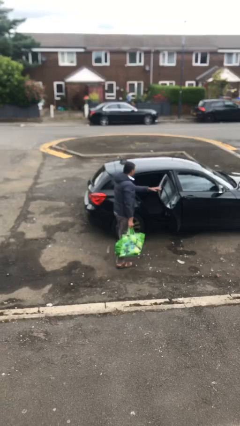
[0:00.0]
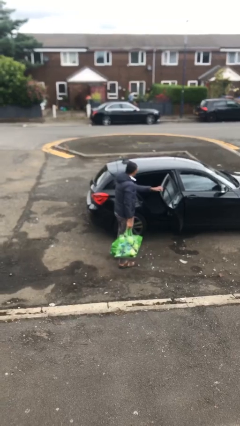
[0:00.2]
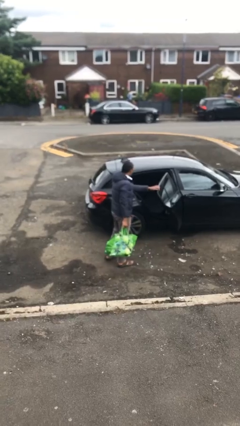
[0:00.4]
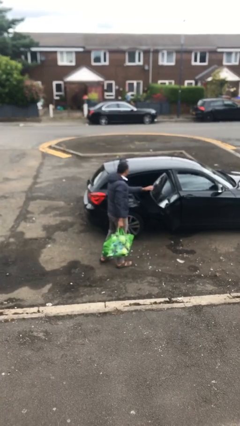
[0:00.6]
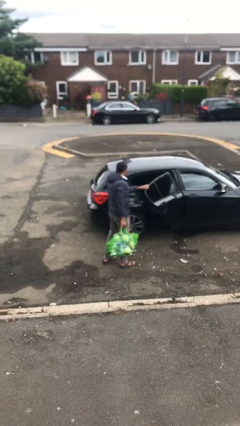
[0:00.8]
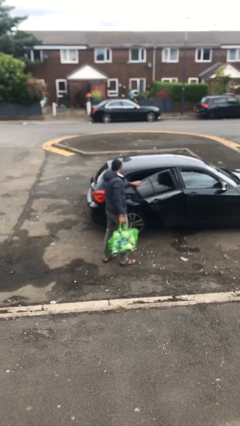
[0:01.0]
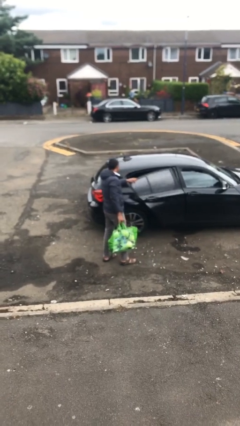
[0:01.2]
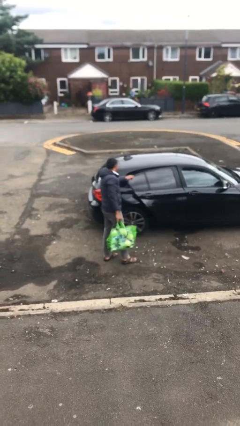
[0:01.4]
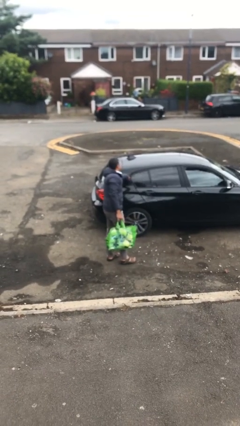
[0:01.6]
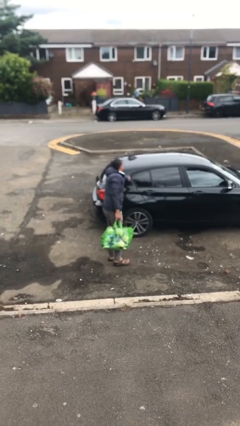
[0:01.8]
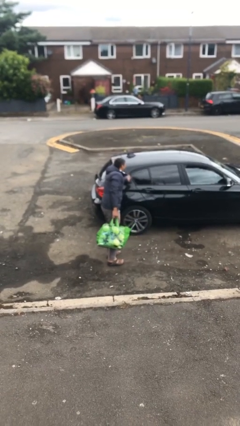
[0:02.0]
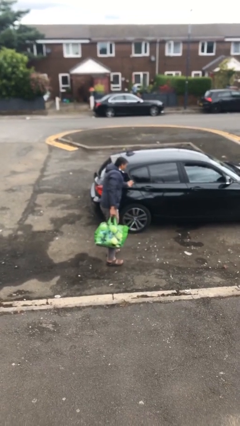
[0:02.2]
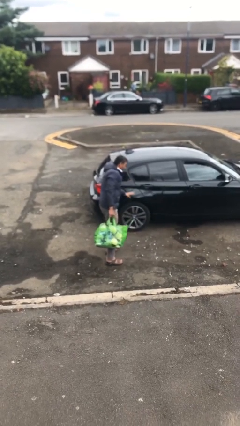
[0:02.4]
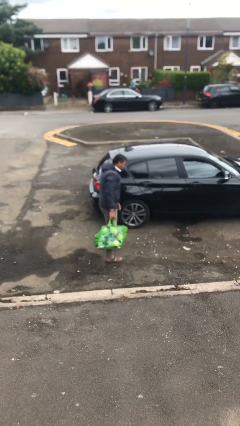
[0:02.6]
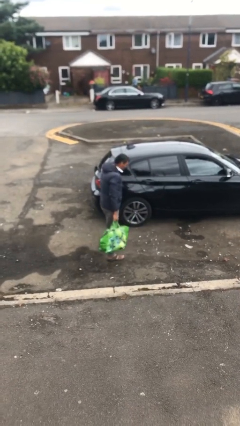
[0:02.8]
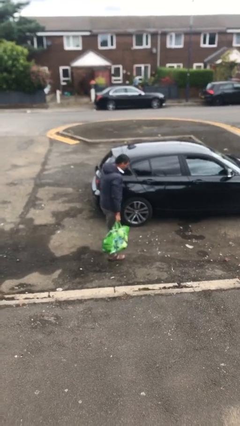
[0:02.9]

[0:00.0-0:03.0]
person closes car door

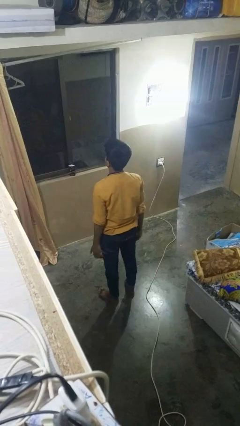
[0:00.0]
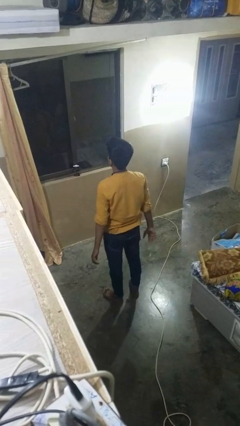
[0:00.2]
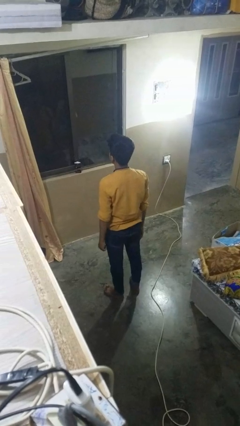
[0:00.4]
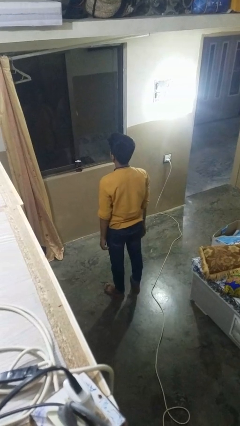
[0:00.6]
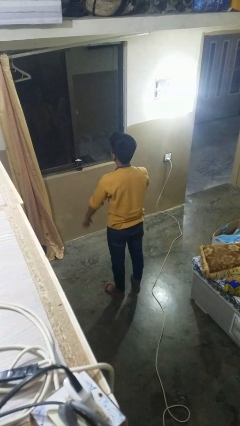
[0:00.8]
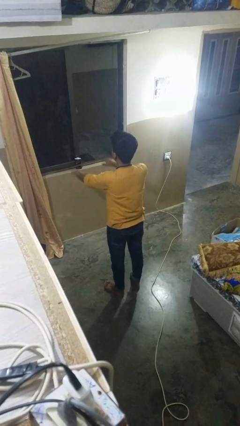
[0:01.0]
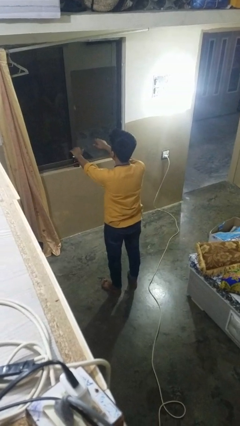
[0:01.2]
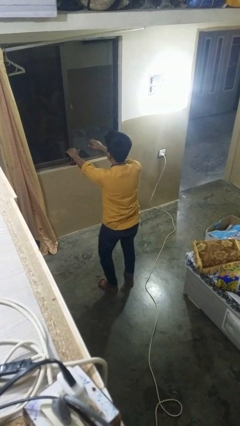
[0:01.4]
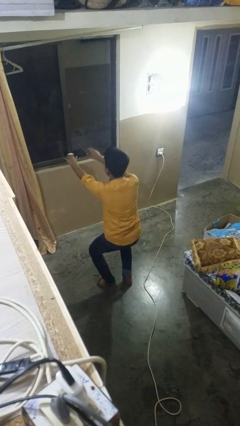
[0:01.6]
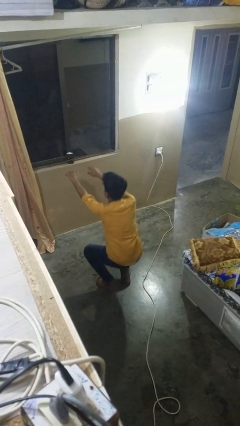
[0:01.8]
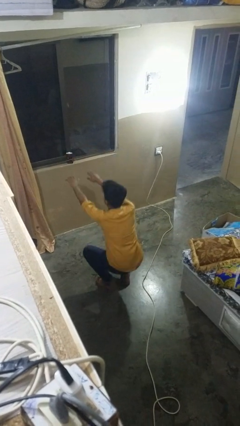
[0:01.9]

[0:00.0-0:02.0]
person squats

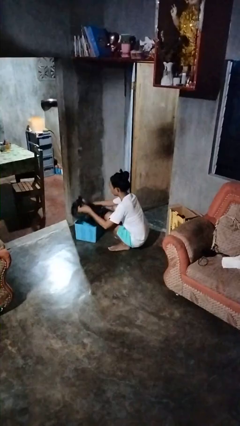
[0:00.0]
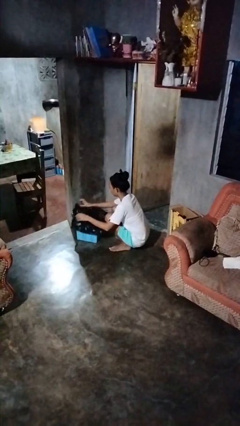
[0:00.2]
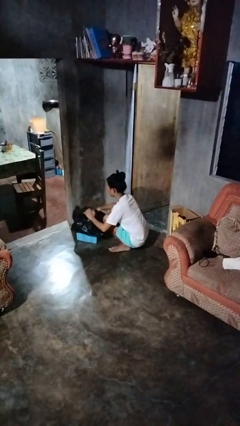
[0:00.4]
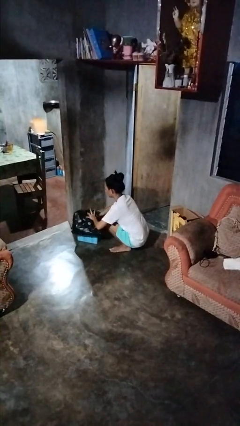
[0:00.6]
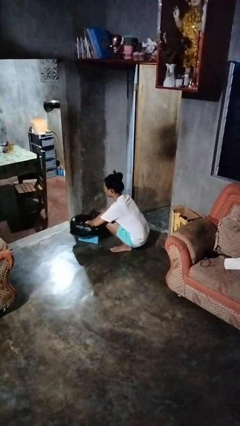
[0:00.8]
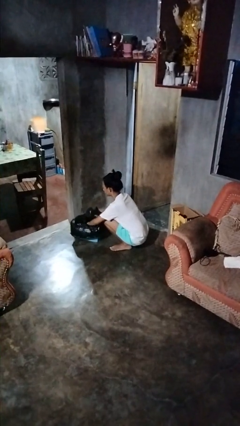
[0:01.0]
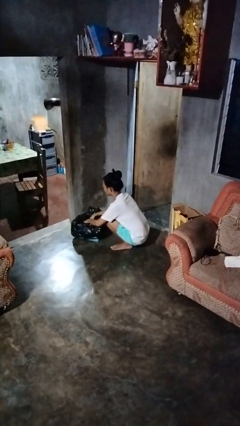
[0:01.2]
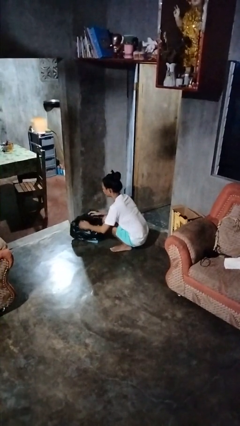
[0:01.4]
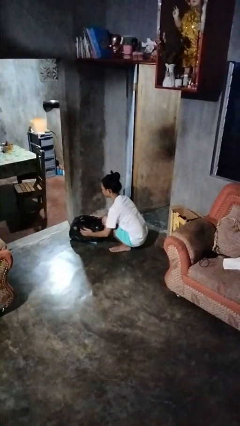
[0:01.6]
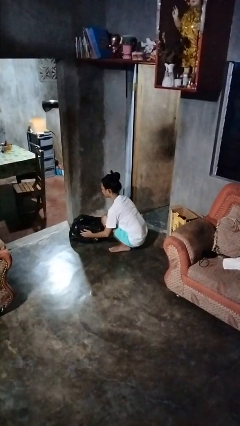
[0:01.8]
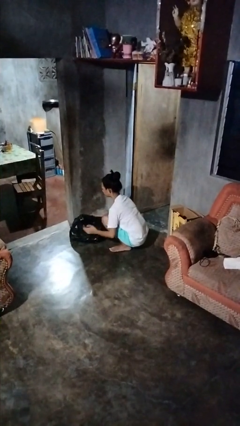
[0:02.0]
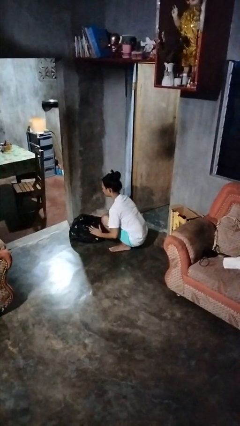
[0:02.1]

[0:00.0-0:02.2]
person inserts trashbag into trashcan

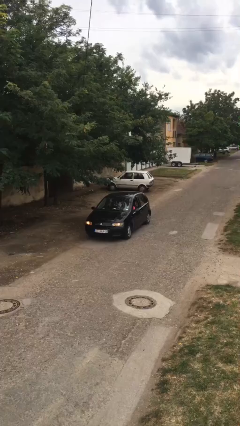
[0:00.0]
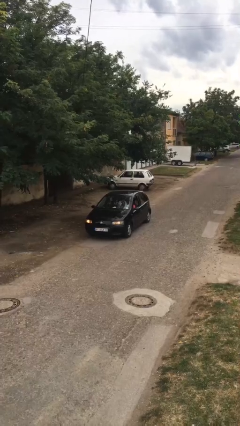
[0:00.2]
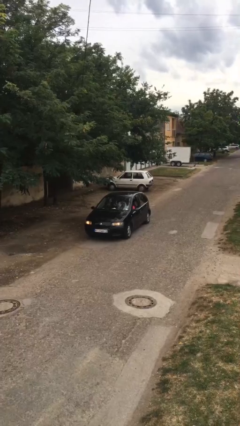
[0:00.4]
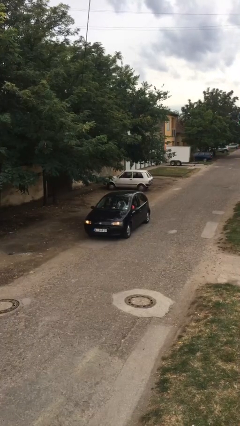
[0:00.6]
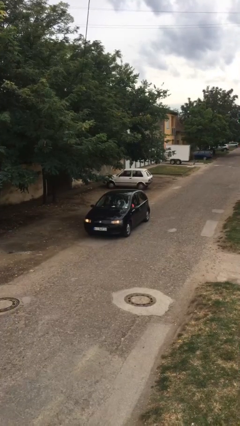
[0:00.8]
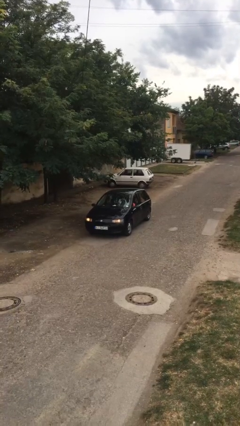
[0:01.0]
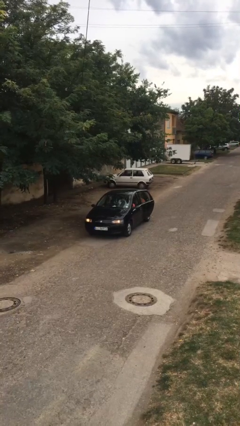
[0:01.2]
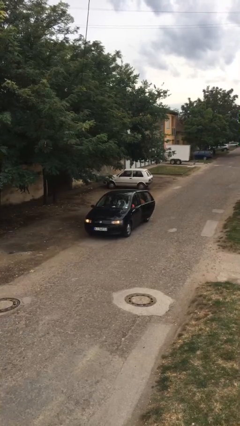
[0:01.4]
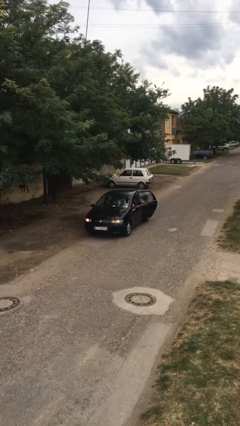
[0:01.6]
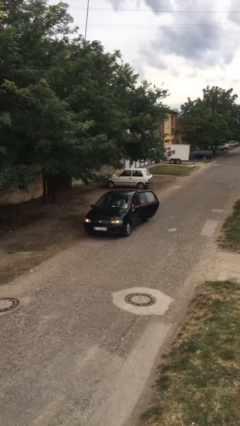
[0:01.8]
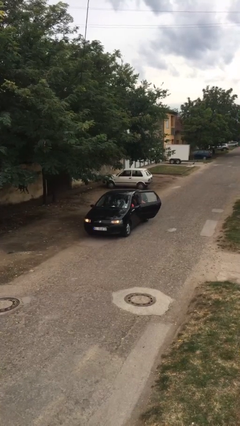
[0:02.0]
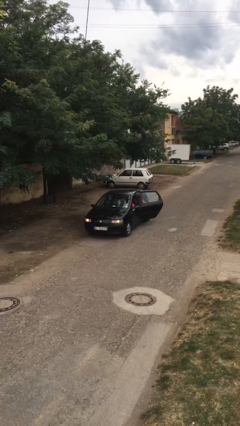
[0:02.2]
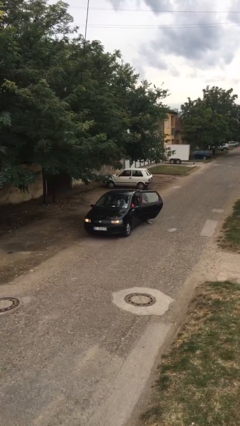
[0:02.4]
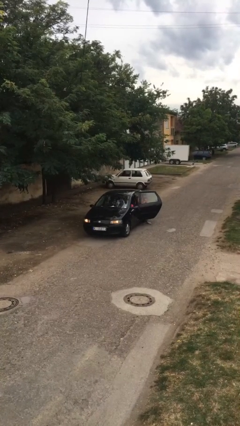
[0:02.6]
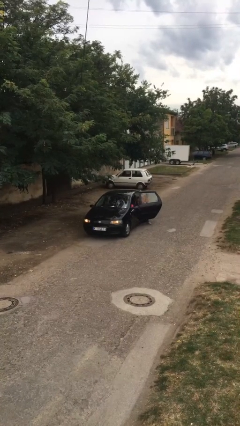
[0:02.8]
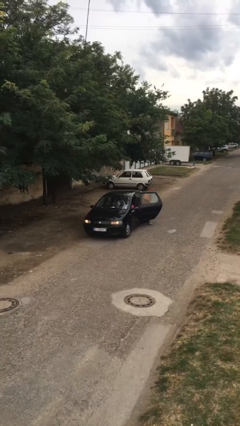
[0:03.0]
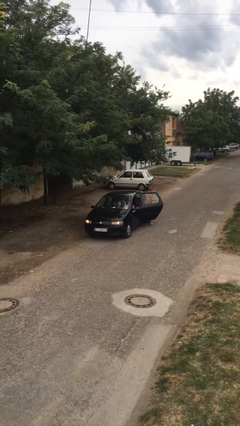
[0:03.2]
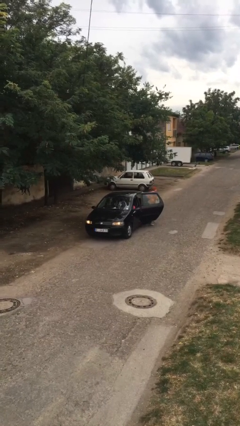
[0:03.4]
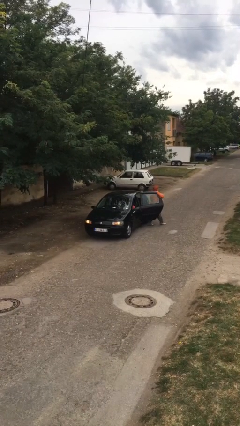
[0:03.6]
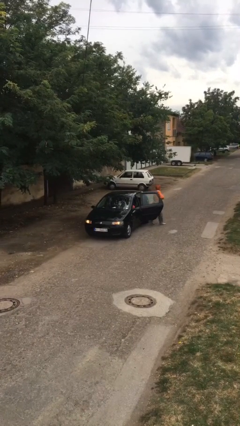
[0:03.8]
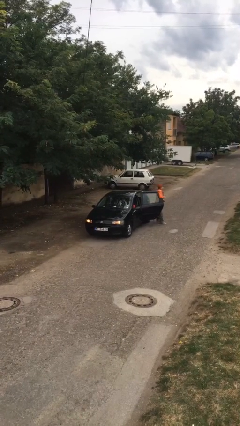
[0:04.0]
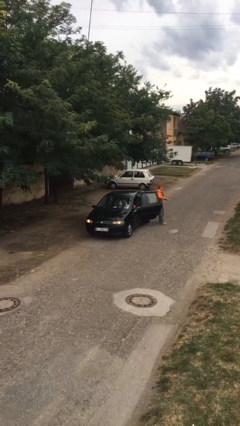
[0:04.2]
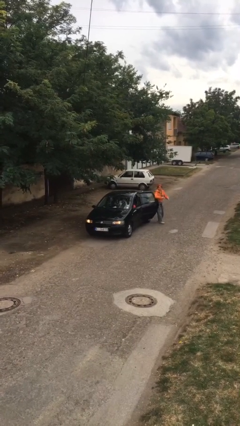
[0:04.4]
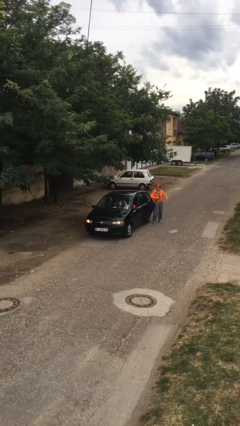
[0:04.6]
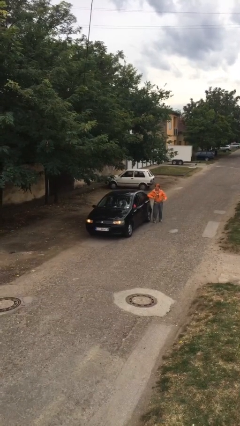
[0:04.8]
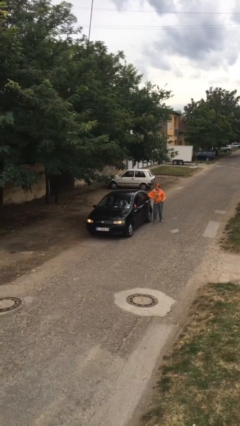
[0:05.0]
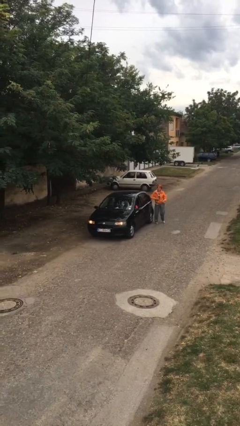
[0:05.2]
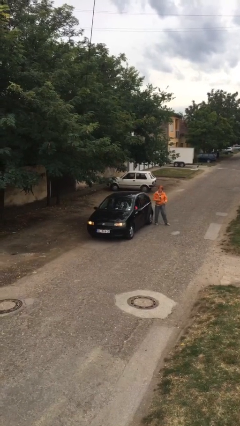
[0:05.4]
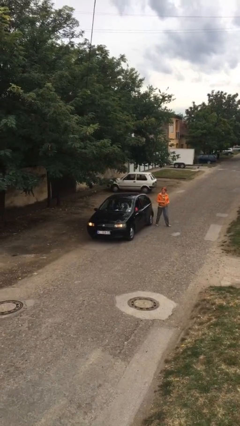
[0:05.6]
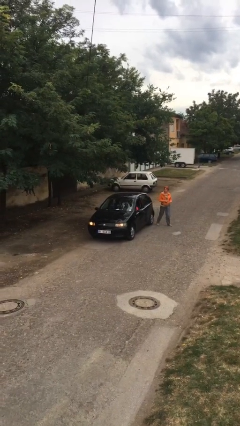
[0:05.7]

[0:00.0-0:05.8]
car drops off person

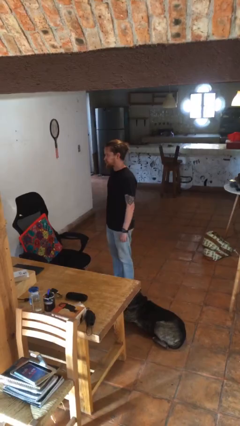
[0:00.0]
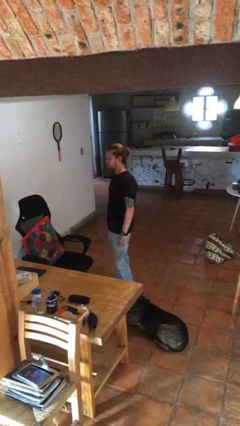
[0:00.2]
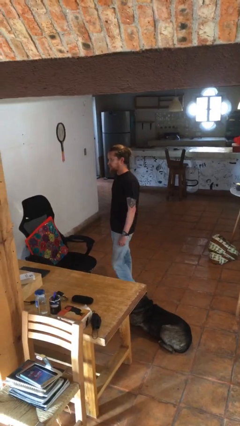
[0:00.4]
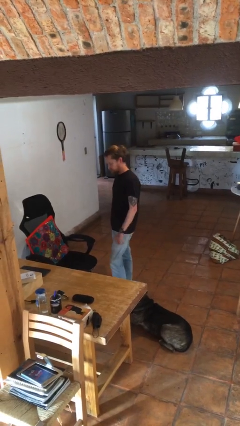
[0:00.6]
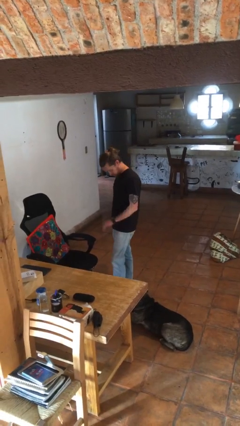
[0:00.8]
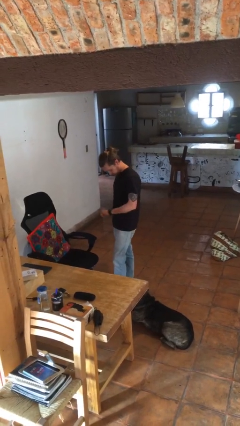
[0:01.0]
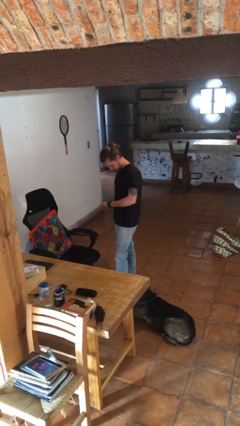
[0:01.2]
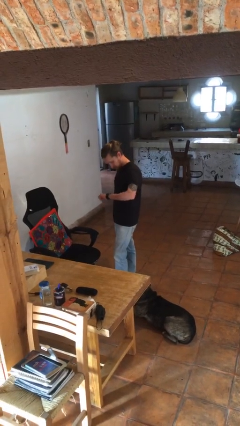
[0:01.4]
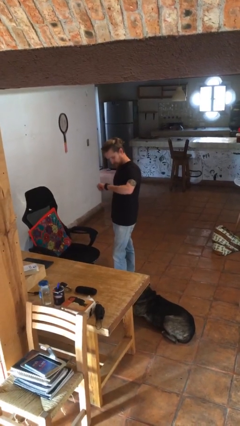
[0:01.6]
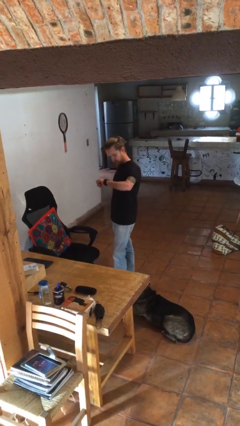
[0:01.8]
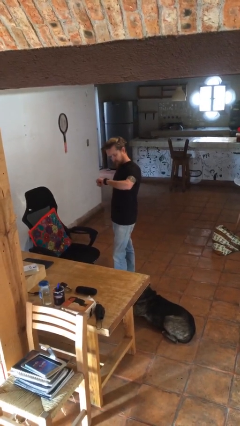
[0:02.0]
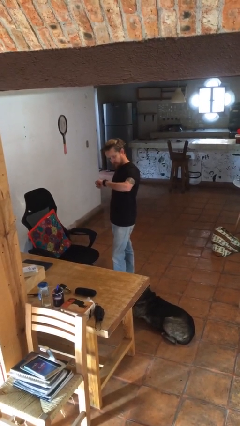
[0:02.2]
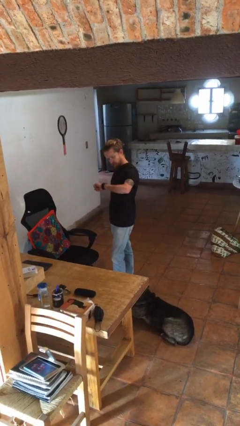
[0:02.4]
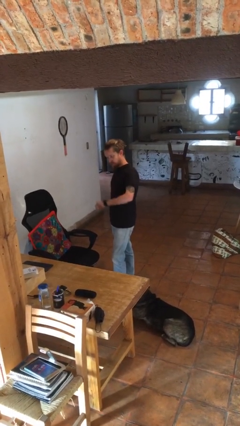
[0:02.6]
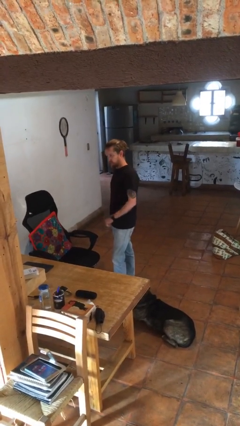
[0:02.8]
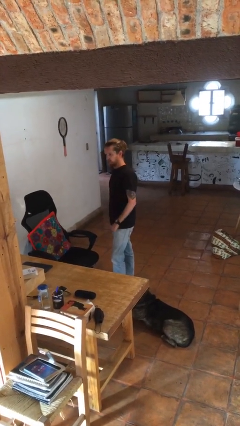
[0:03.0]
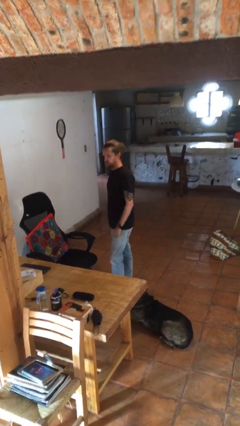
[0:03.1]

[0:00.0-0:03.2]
person looks at wristwatch

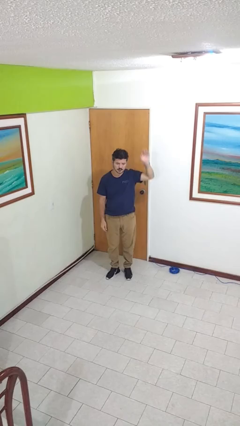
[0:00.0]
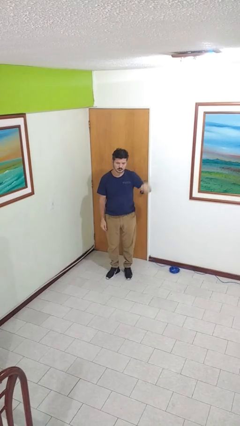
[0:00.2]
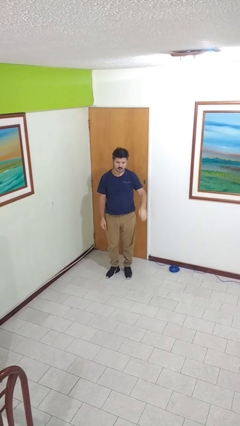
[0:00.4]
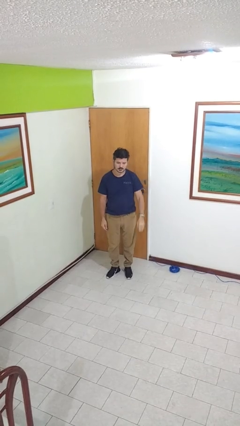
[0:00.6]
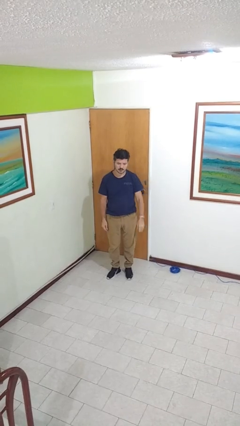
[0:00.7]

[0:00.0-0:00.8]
person gestures lower hand
